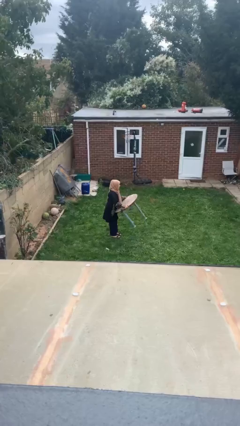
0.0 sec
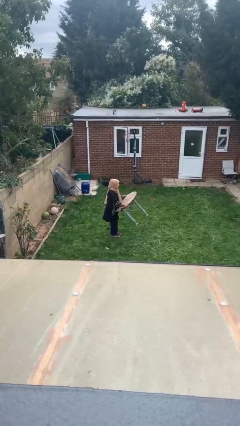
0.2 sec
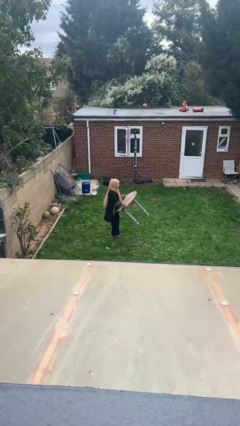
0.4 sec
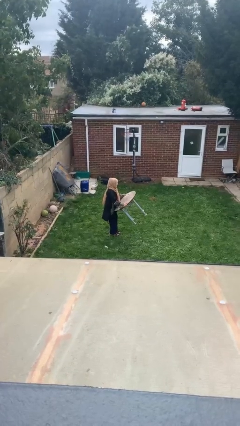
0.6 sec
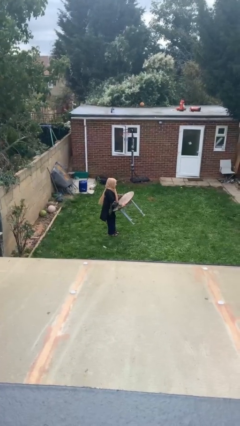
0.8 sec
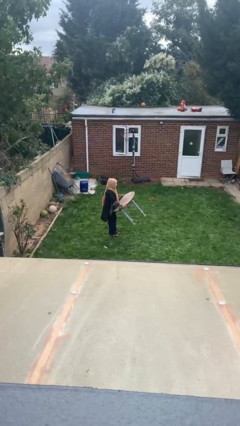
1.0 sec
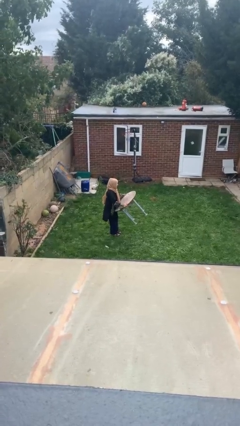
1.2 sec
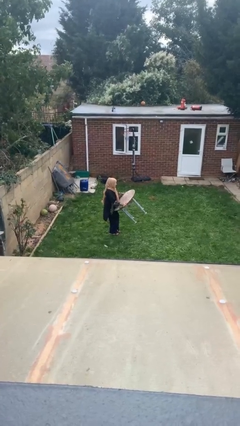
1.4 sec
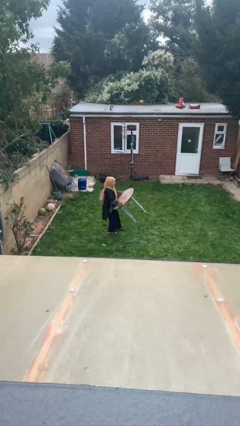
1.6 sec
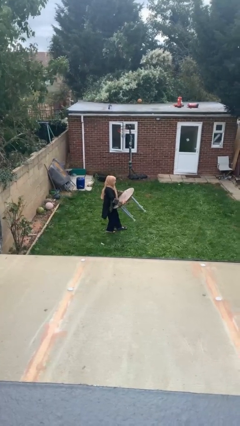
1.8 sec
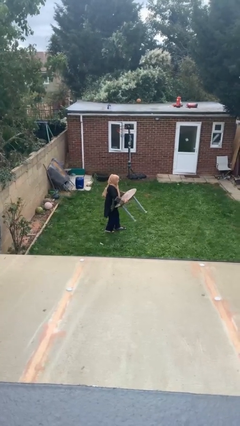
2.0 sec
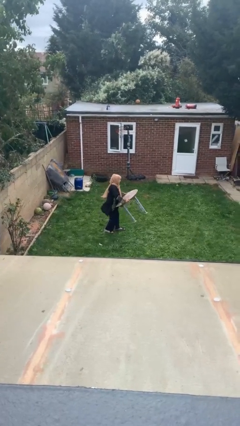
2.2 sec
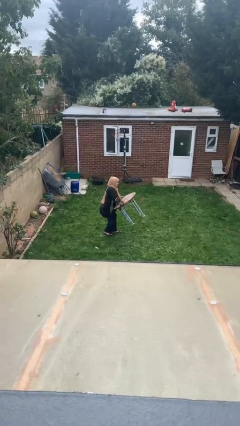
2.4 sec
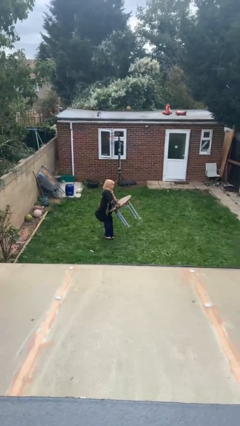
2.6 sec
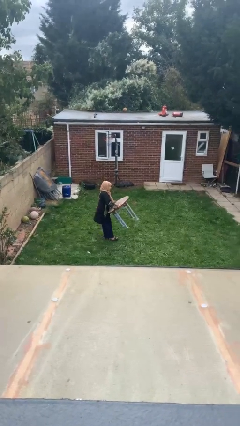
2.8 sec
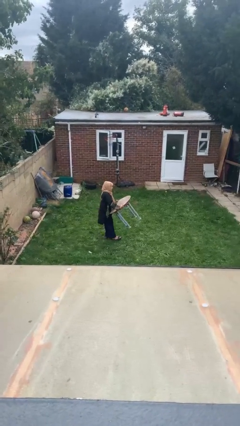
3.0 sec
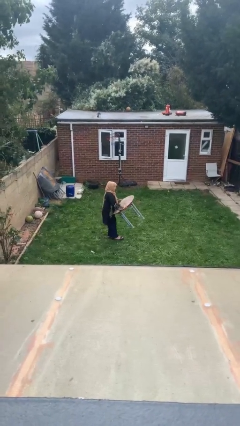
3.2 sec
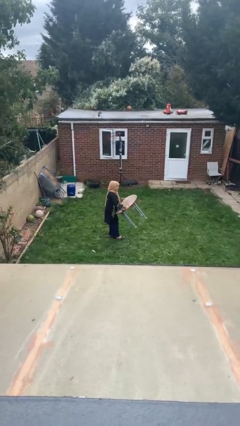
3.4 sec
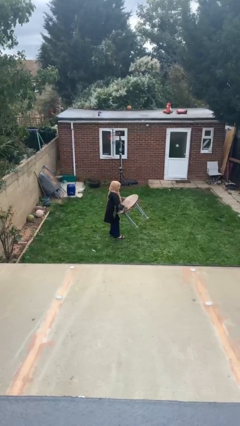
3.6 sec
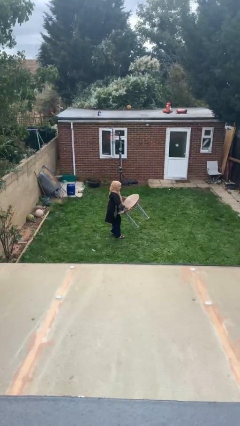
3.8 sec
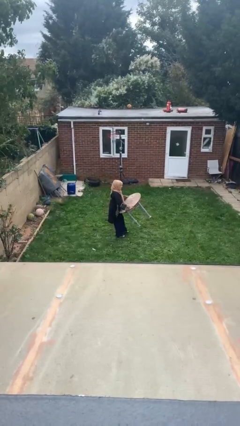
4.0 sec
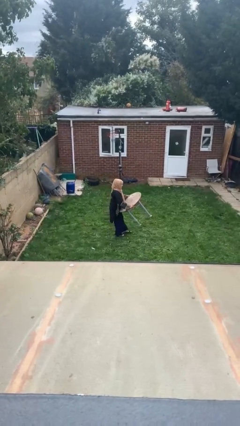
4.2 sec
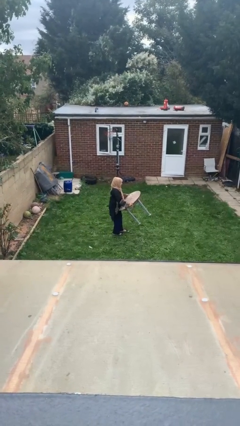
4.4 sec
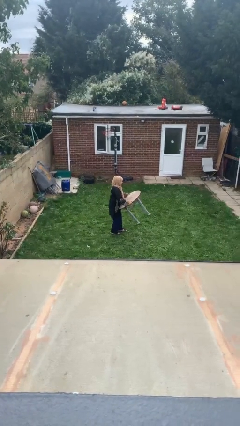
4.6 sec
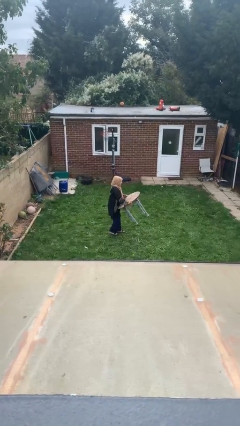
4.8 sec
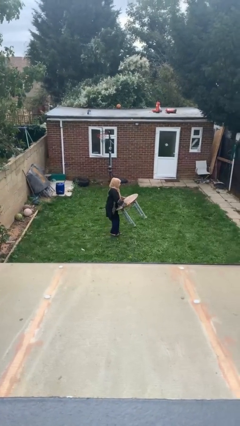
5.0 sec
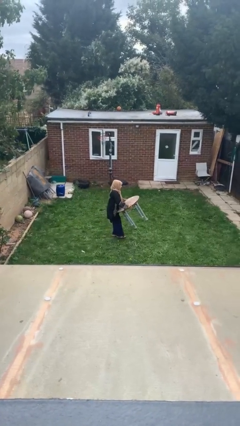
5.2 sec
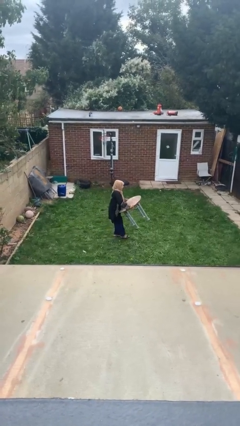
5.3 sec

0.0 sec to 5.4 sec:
person carries heavy object

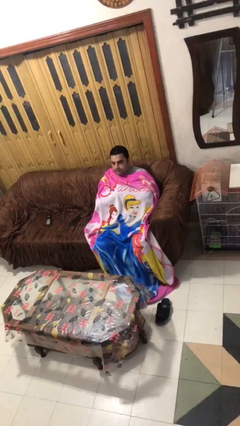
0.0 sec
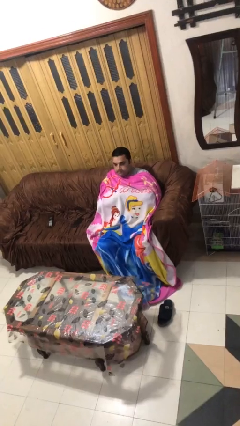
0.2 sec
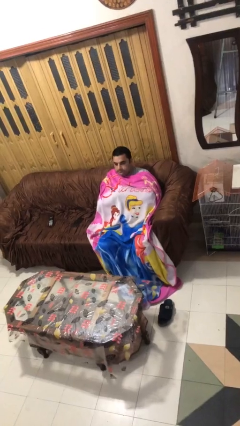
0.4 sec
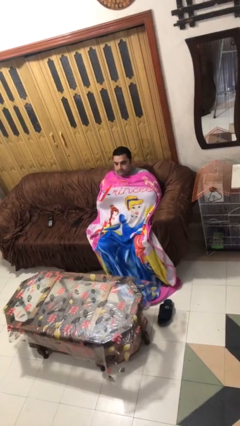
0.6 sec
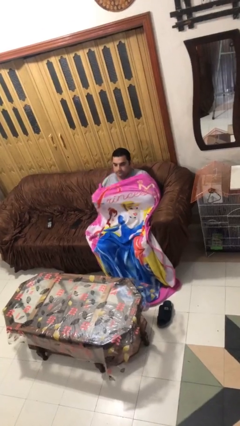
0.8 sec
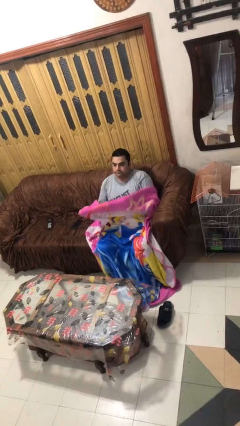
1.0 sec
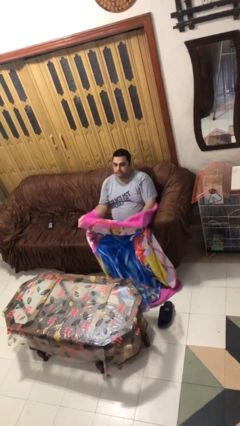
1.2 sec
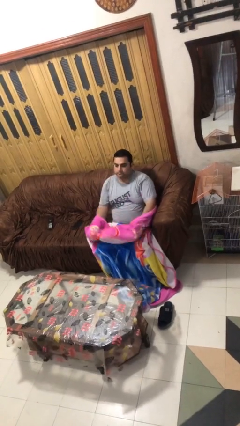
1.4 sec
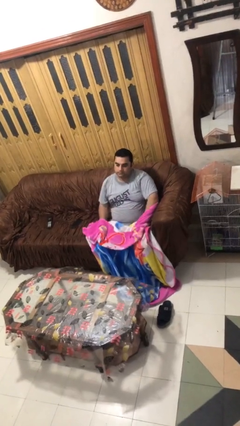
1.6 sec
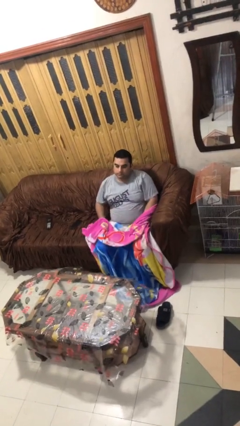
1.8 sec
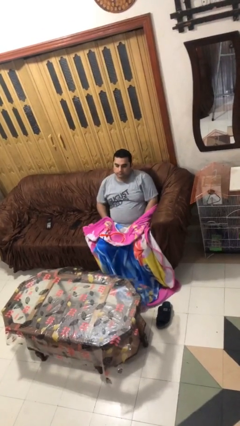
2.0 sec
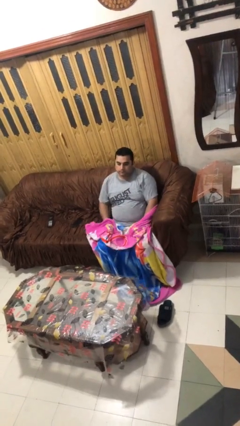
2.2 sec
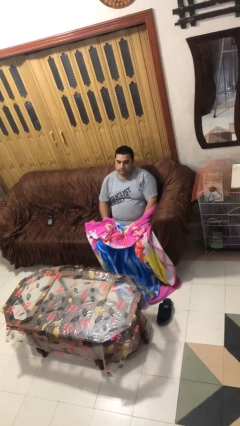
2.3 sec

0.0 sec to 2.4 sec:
person uncovers with blanket

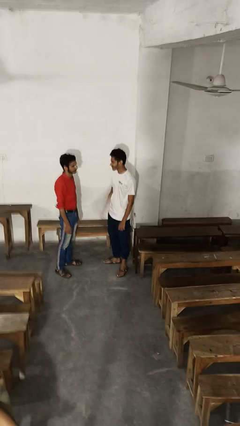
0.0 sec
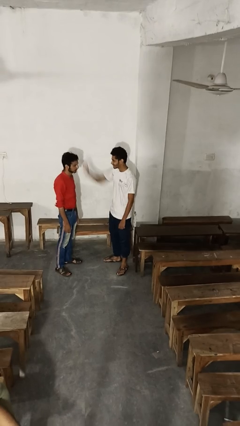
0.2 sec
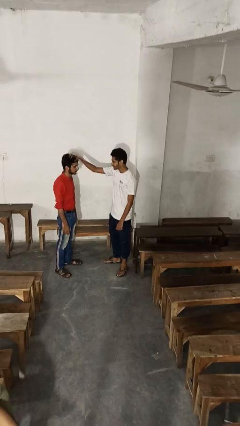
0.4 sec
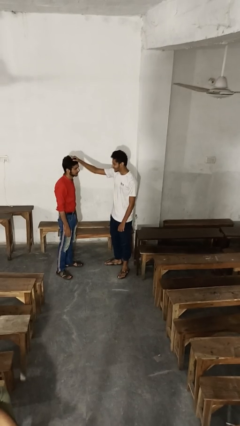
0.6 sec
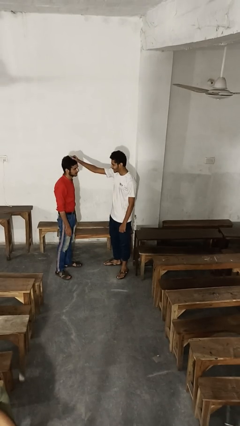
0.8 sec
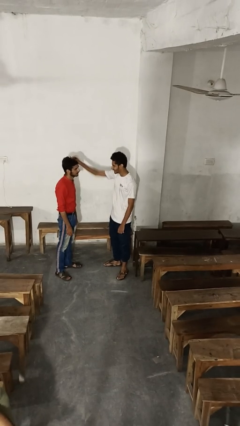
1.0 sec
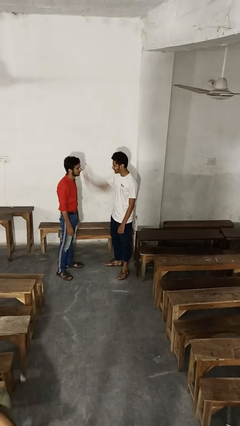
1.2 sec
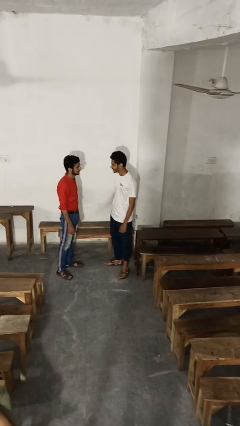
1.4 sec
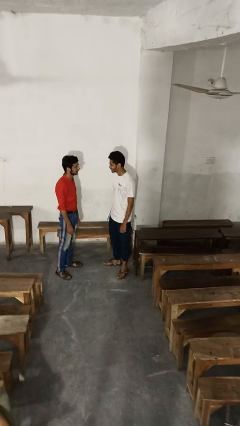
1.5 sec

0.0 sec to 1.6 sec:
person grabs person by hair

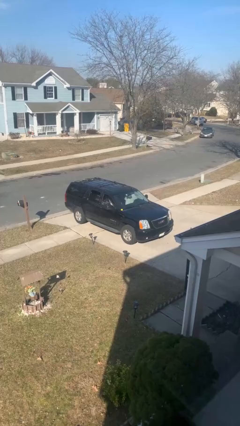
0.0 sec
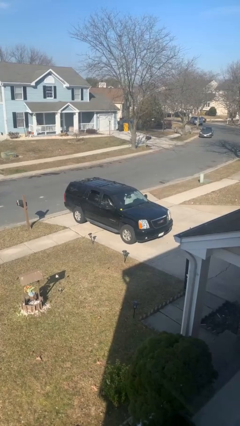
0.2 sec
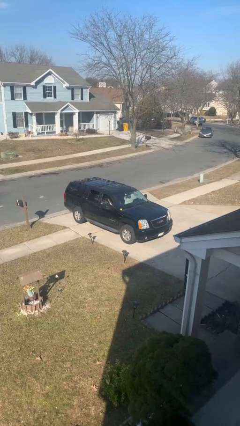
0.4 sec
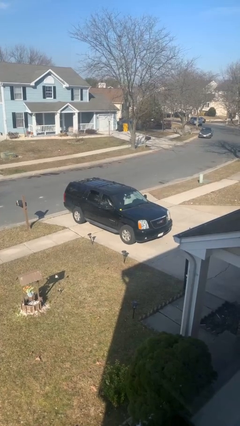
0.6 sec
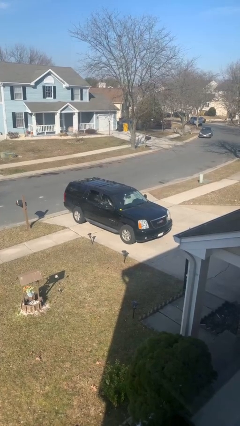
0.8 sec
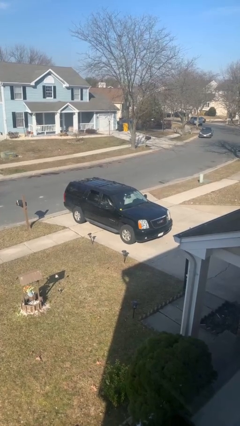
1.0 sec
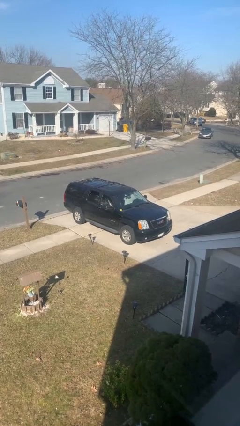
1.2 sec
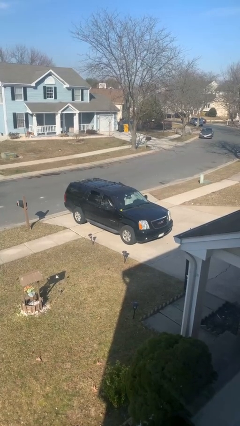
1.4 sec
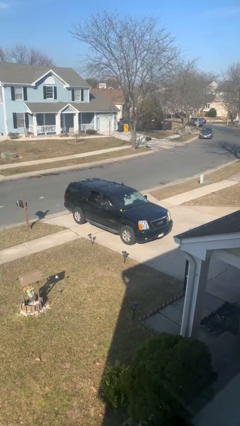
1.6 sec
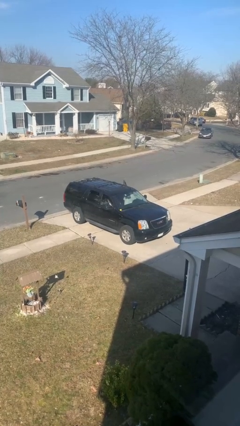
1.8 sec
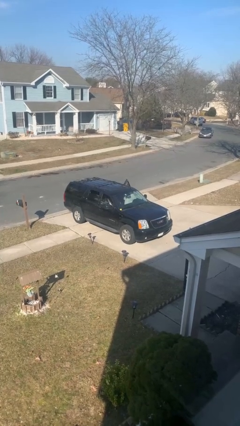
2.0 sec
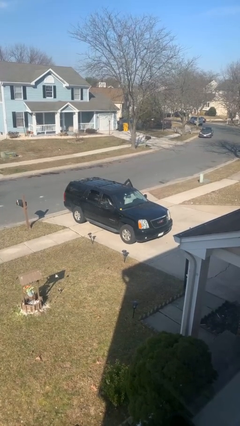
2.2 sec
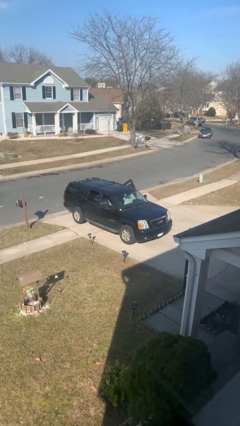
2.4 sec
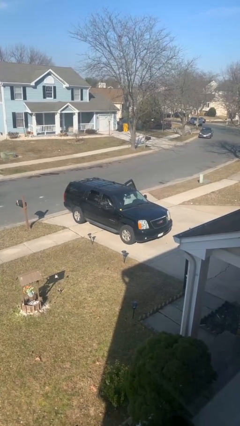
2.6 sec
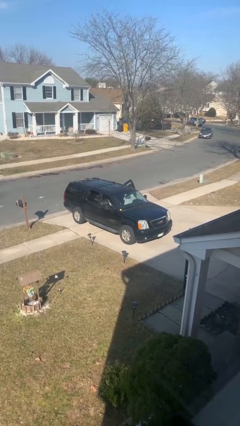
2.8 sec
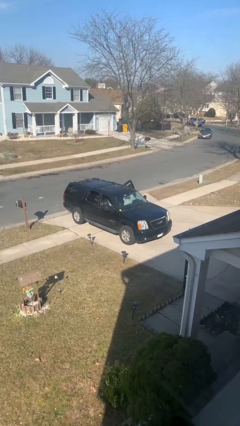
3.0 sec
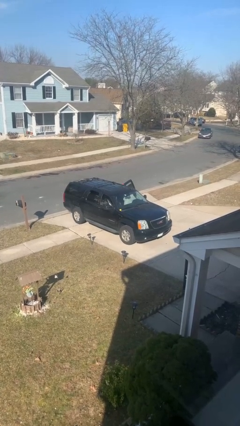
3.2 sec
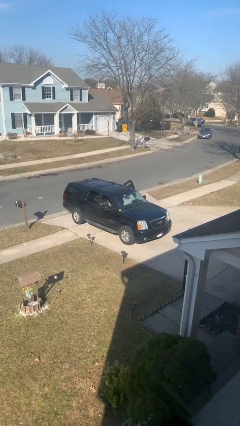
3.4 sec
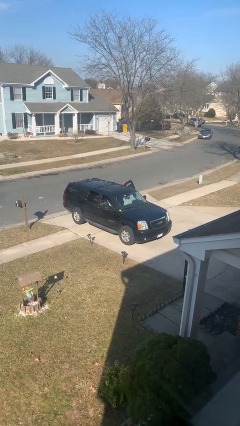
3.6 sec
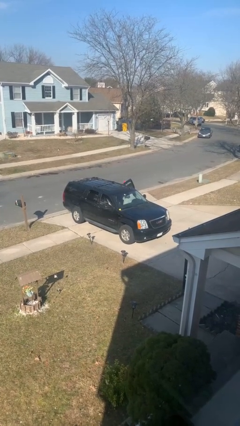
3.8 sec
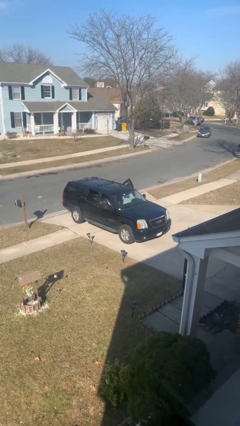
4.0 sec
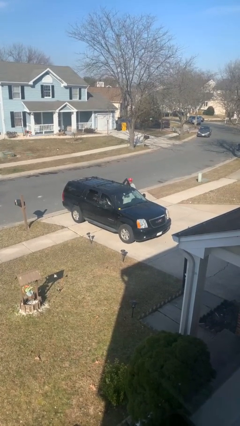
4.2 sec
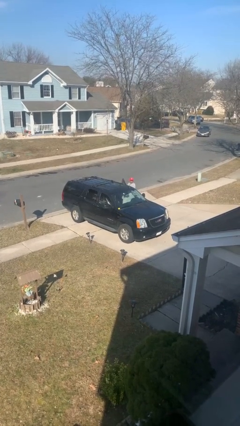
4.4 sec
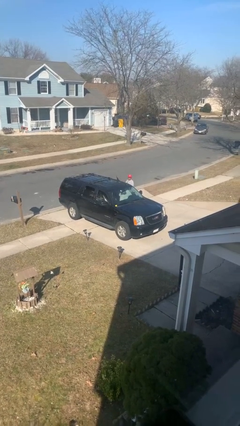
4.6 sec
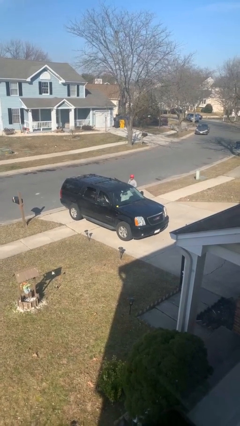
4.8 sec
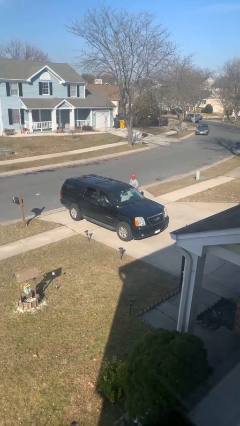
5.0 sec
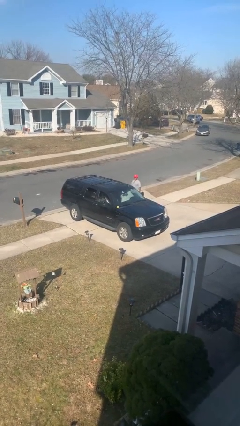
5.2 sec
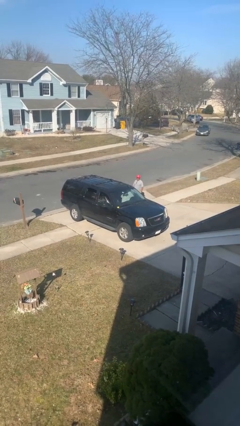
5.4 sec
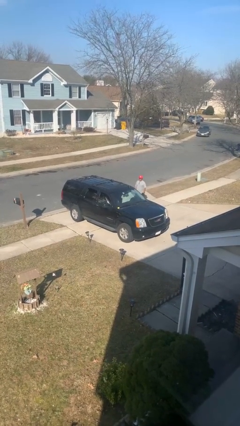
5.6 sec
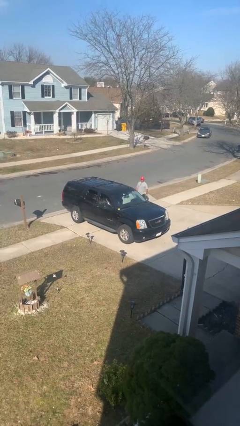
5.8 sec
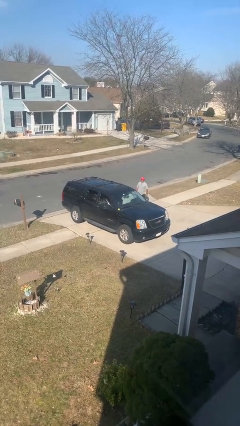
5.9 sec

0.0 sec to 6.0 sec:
car drops off person

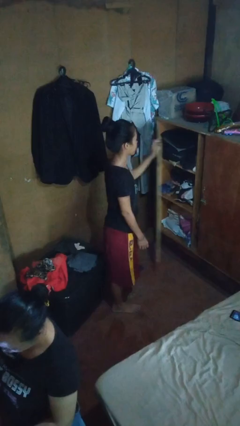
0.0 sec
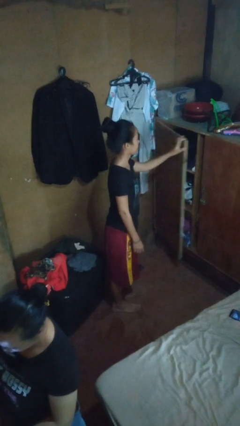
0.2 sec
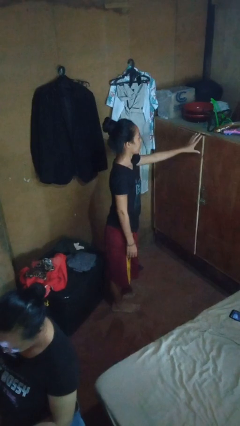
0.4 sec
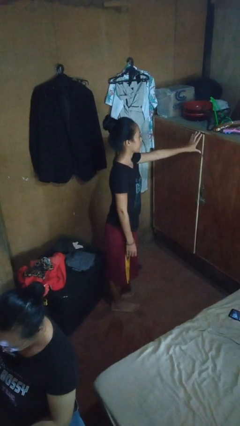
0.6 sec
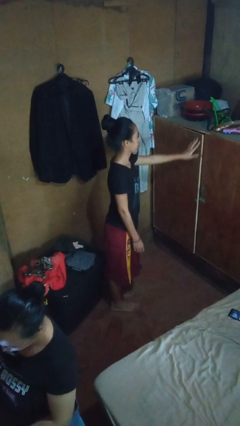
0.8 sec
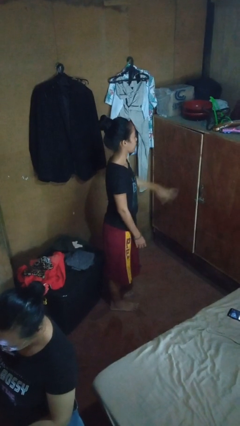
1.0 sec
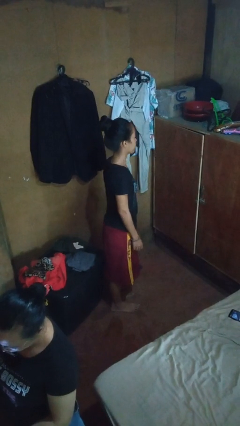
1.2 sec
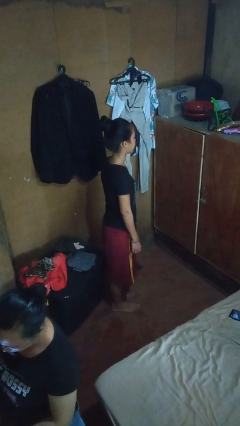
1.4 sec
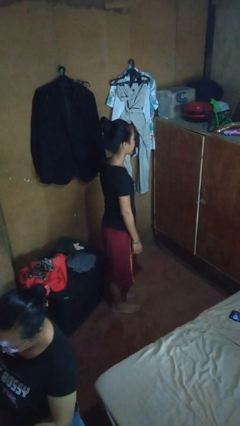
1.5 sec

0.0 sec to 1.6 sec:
person closes closet door

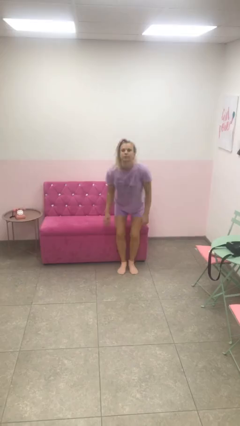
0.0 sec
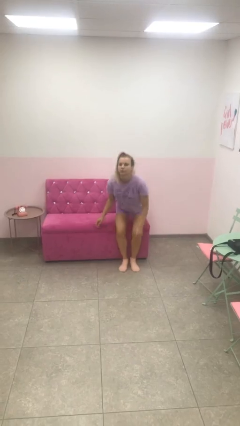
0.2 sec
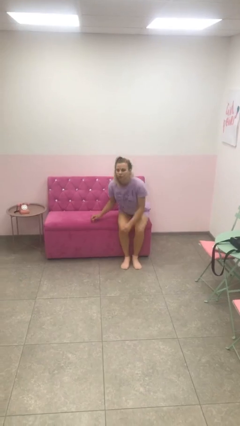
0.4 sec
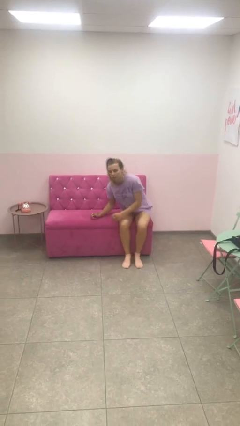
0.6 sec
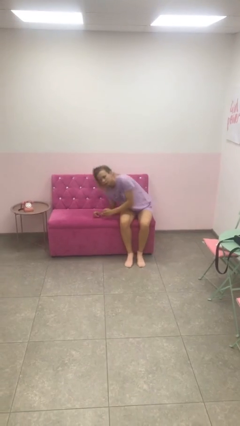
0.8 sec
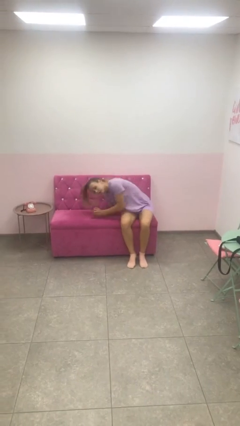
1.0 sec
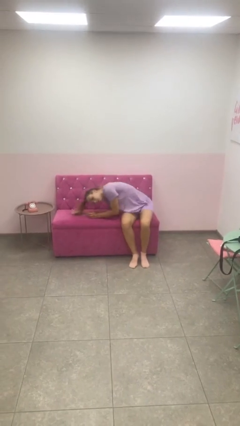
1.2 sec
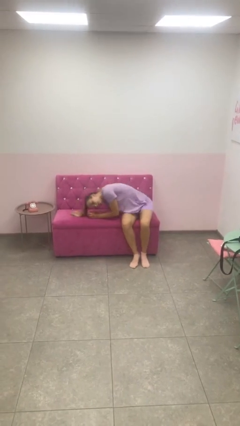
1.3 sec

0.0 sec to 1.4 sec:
person lies down on couch
